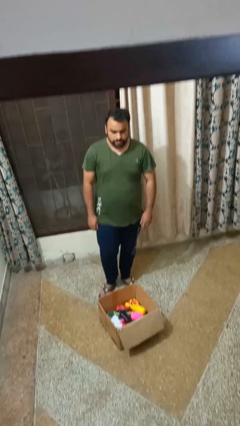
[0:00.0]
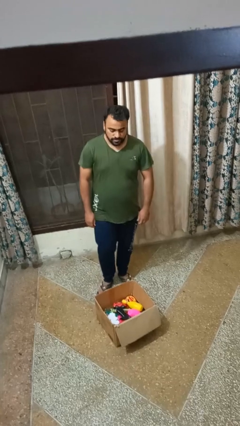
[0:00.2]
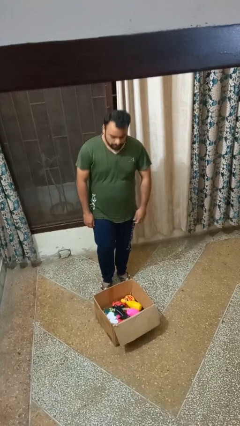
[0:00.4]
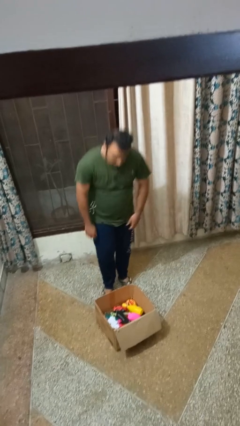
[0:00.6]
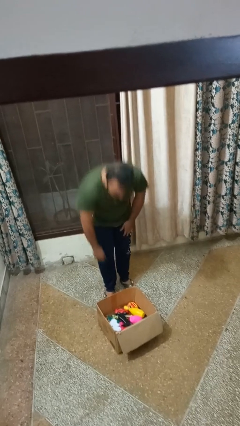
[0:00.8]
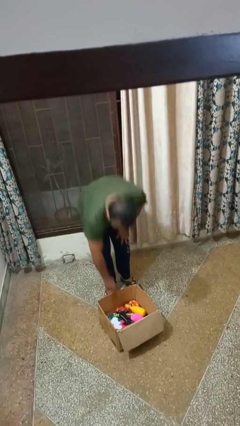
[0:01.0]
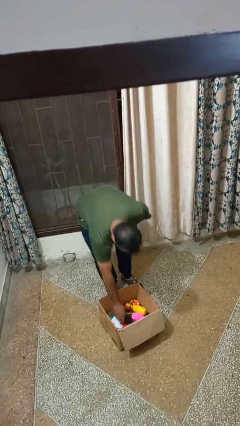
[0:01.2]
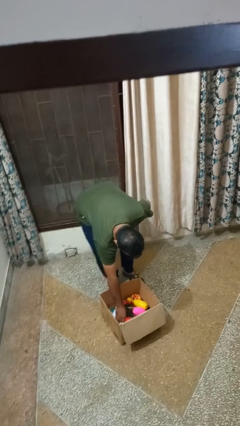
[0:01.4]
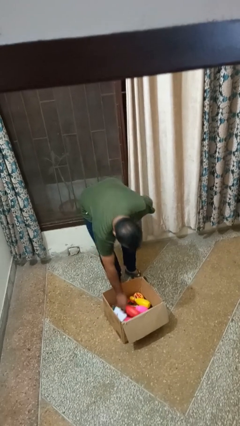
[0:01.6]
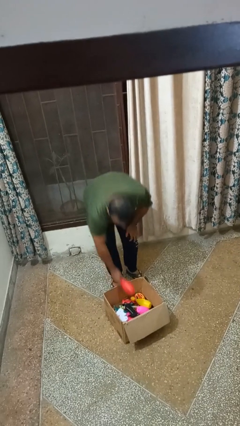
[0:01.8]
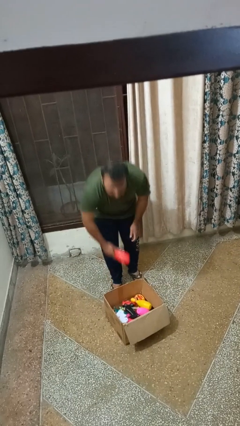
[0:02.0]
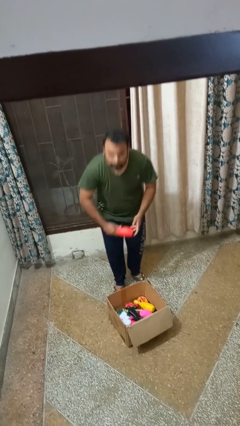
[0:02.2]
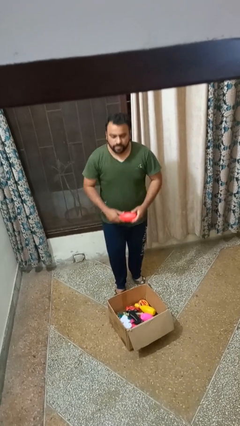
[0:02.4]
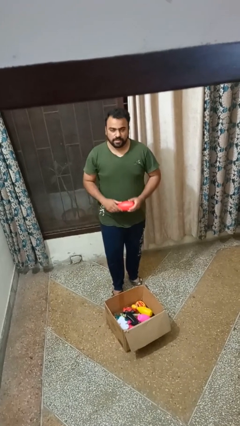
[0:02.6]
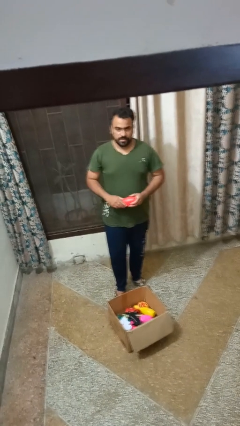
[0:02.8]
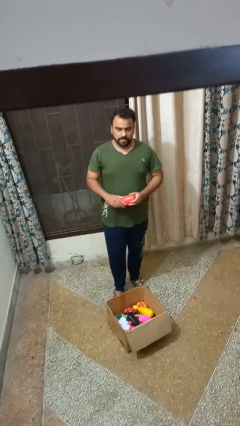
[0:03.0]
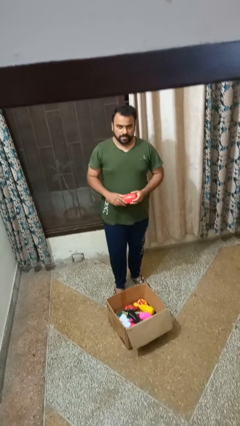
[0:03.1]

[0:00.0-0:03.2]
person takes object from box

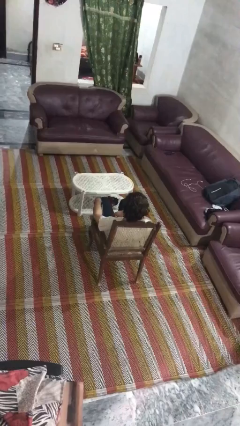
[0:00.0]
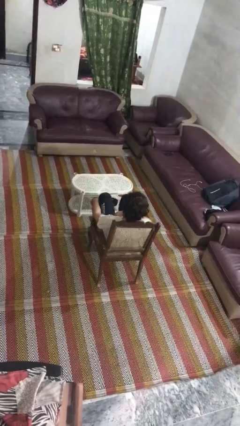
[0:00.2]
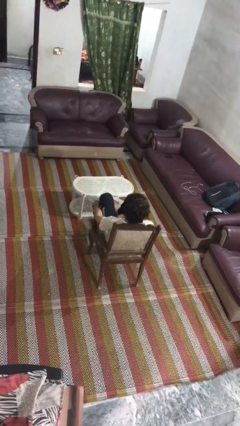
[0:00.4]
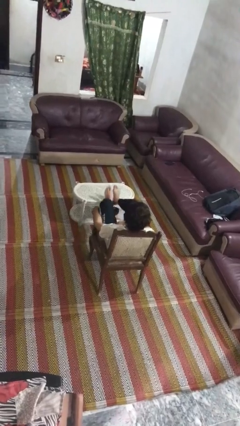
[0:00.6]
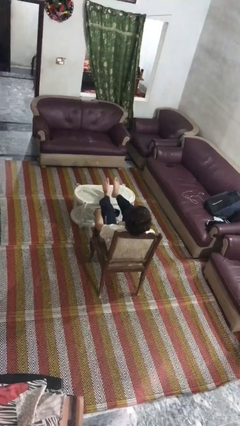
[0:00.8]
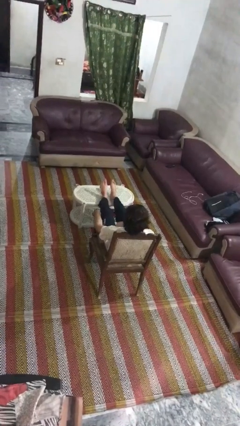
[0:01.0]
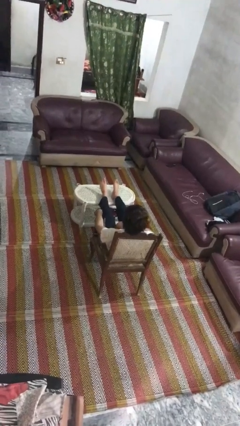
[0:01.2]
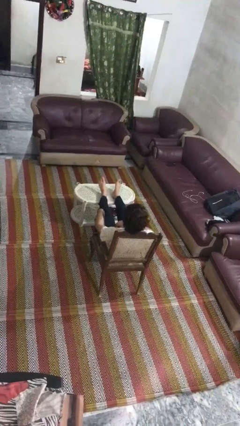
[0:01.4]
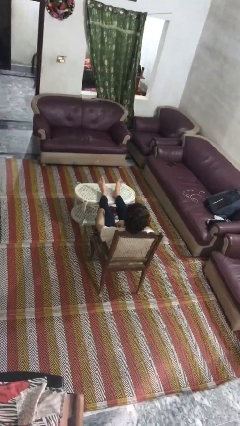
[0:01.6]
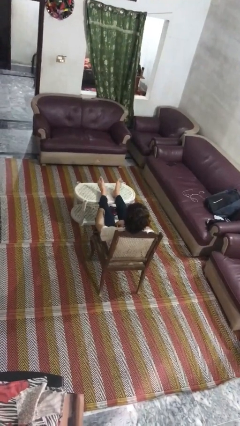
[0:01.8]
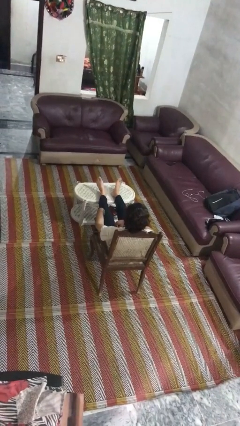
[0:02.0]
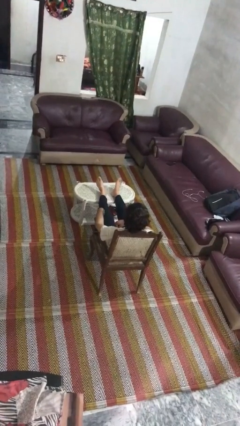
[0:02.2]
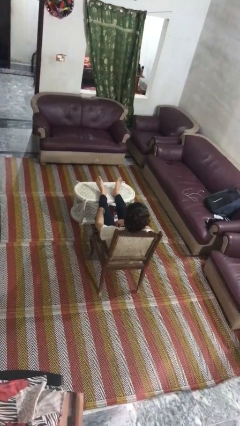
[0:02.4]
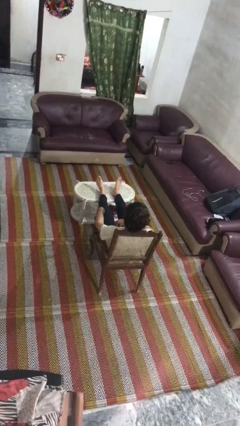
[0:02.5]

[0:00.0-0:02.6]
person puts feet up

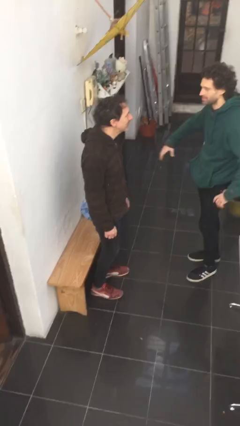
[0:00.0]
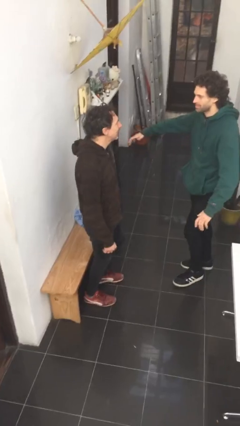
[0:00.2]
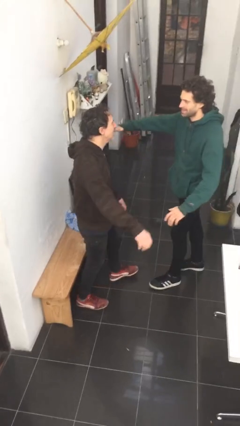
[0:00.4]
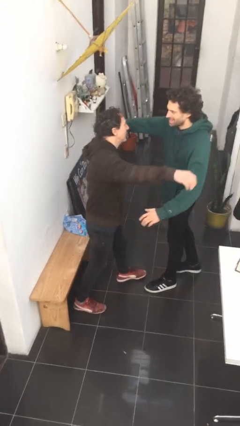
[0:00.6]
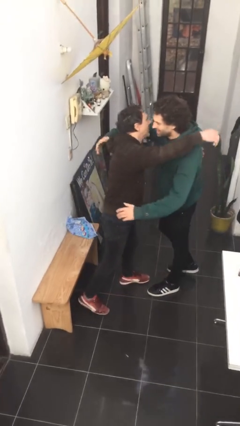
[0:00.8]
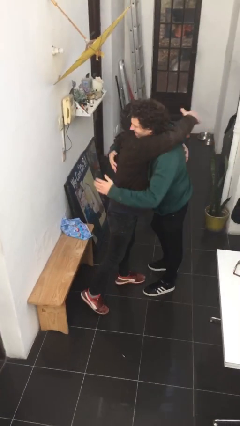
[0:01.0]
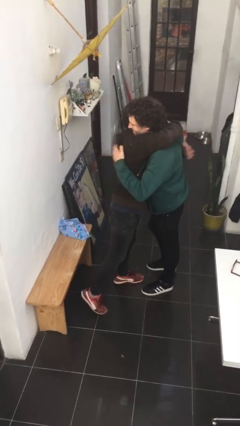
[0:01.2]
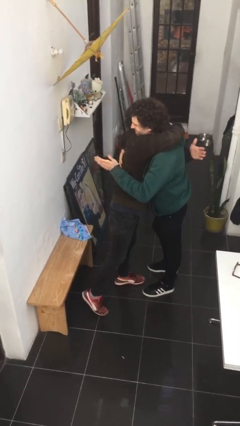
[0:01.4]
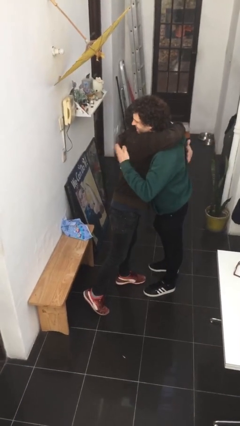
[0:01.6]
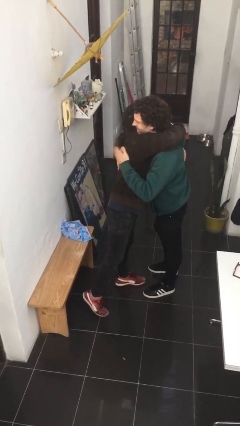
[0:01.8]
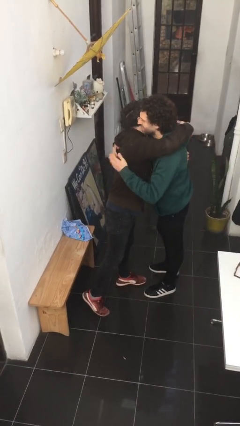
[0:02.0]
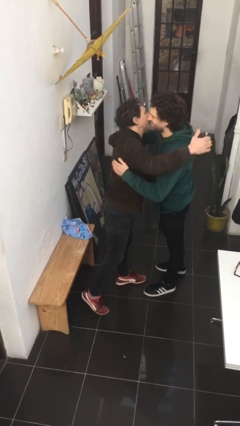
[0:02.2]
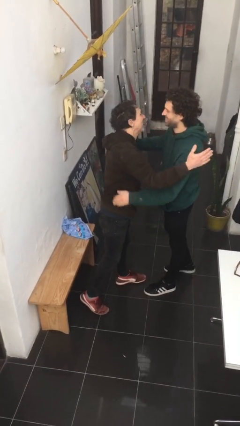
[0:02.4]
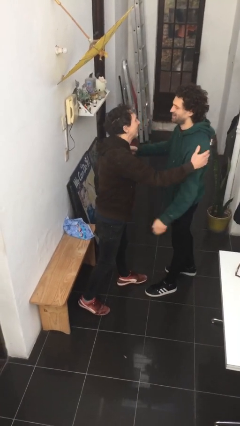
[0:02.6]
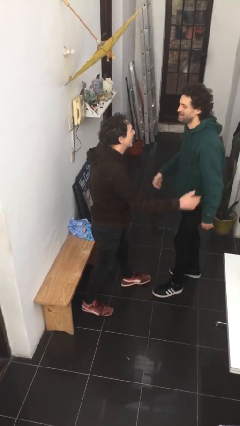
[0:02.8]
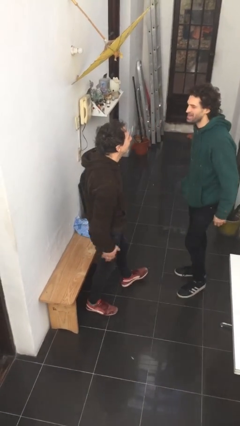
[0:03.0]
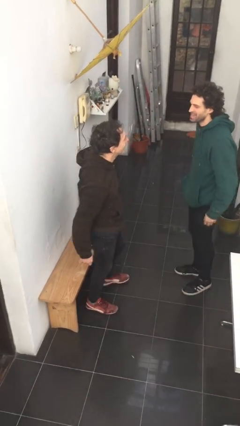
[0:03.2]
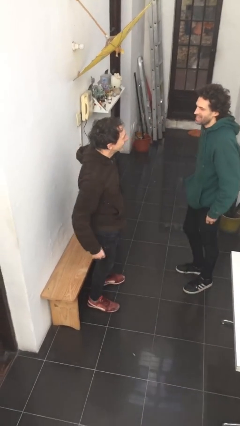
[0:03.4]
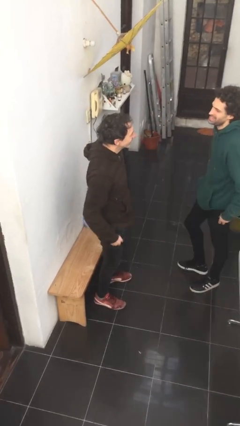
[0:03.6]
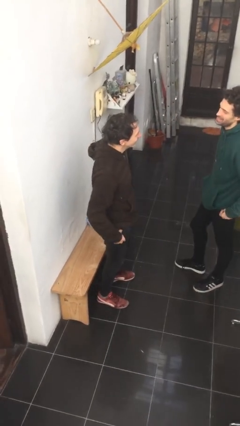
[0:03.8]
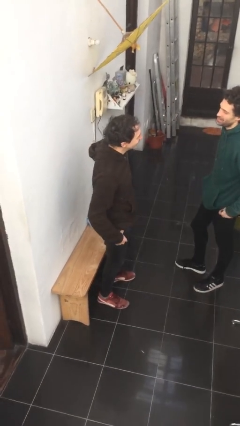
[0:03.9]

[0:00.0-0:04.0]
person embraces person

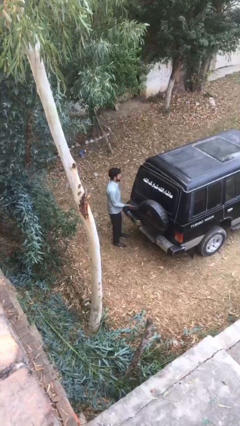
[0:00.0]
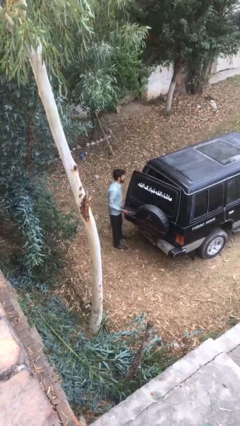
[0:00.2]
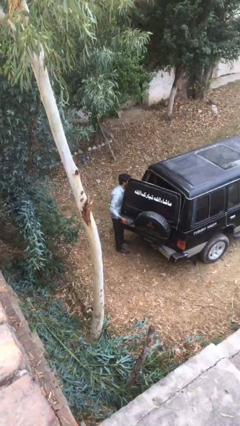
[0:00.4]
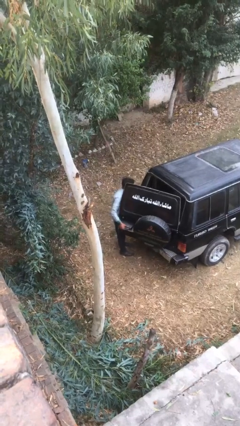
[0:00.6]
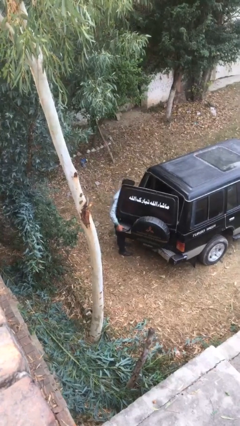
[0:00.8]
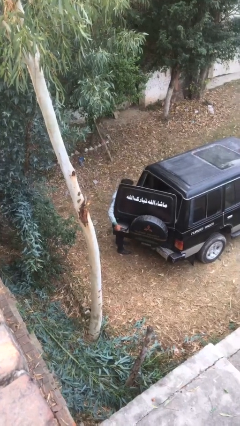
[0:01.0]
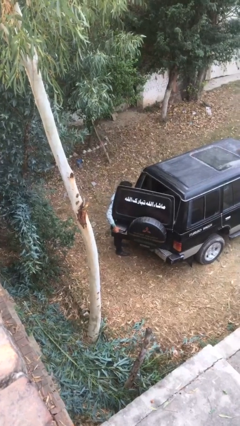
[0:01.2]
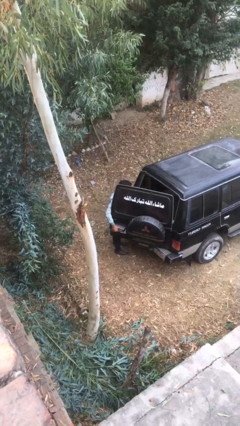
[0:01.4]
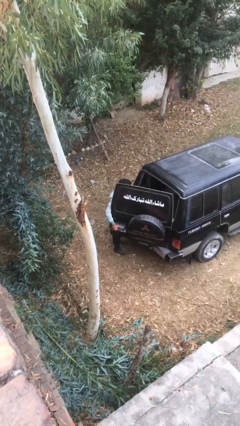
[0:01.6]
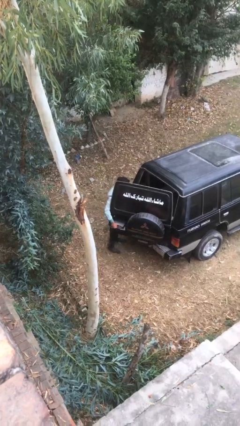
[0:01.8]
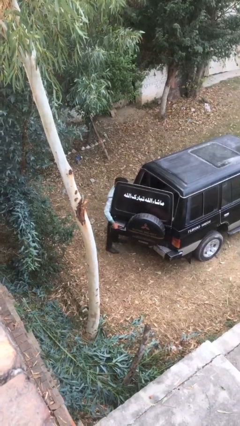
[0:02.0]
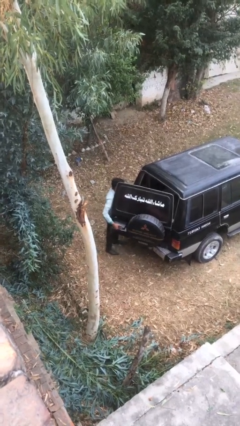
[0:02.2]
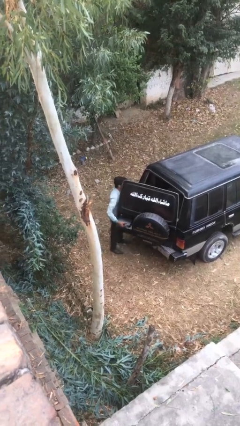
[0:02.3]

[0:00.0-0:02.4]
person opens car trunk

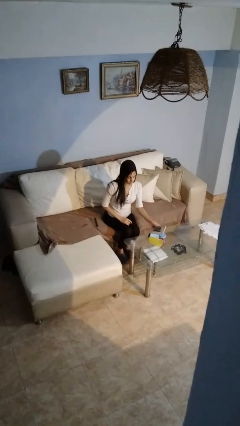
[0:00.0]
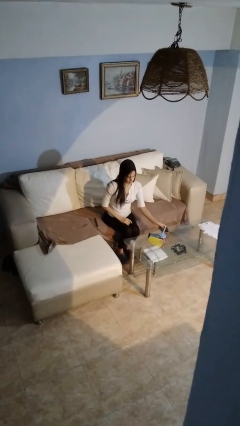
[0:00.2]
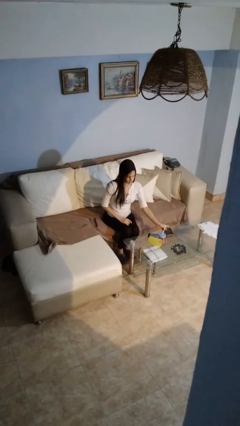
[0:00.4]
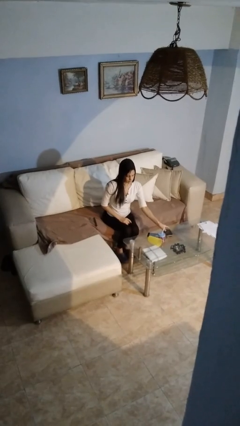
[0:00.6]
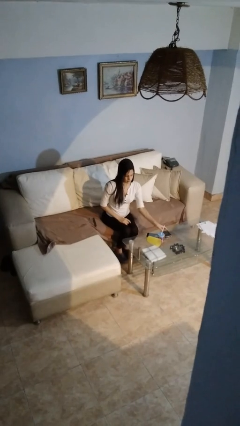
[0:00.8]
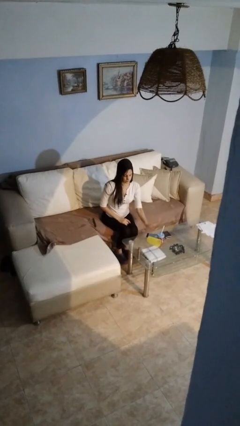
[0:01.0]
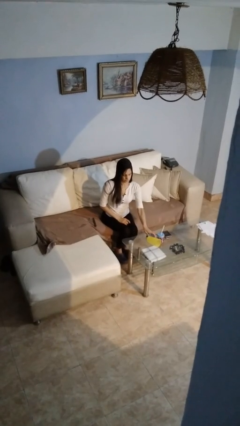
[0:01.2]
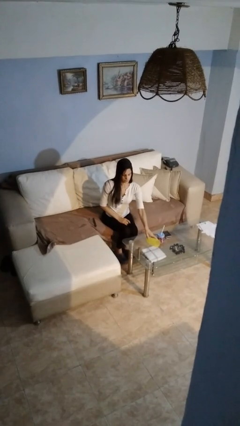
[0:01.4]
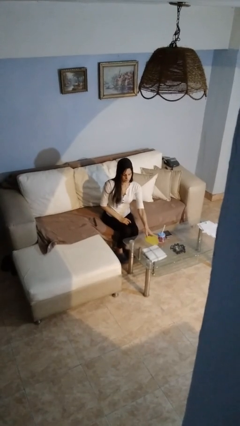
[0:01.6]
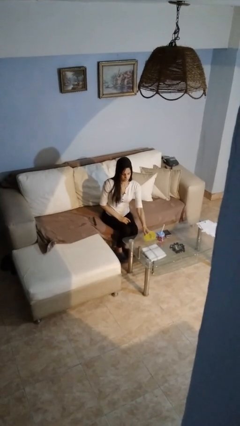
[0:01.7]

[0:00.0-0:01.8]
person sets upright glass

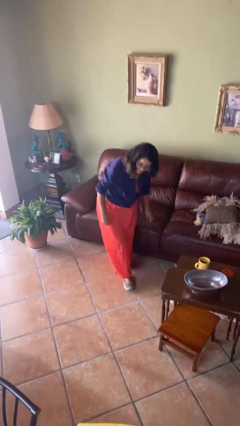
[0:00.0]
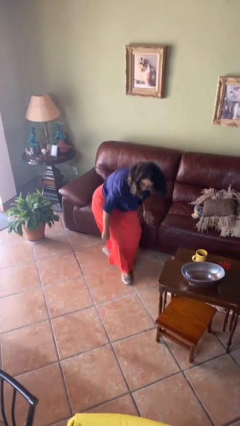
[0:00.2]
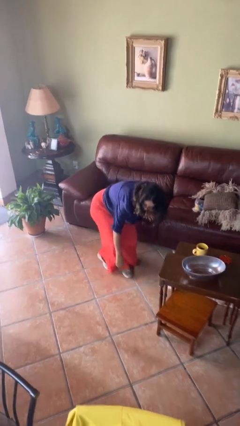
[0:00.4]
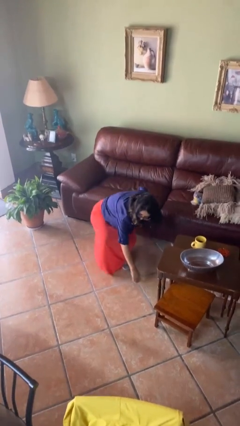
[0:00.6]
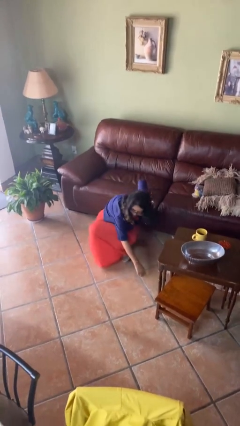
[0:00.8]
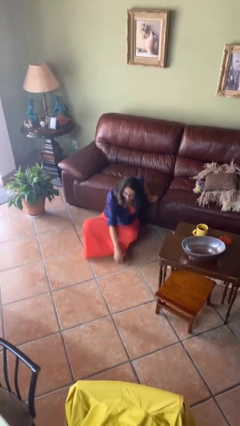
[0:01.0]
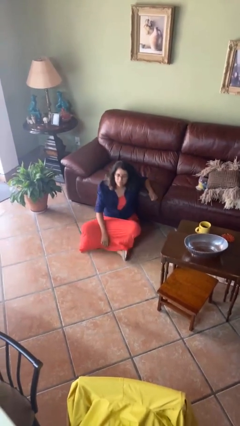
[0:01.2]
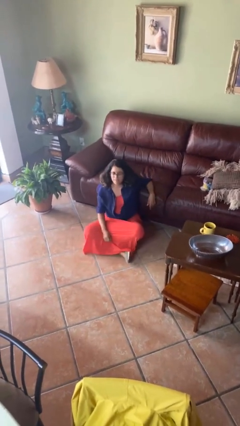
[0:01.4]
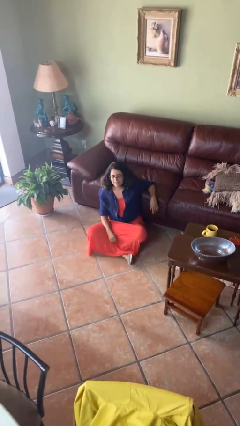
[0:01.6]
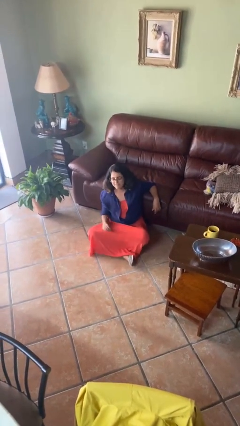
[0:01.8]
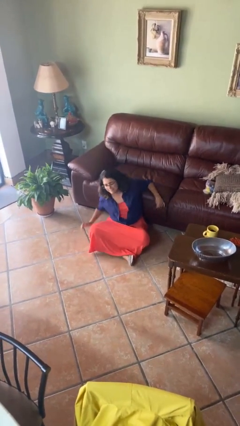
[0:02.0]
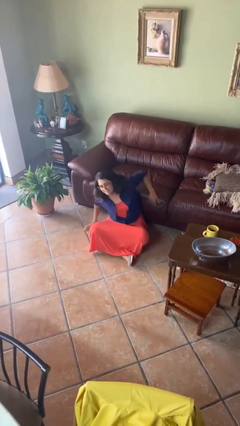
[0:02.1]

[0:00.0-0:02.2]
person sits crisscross

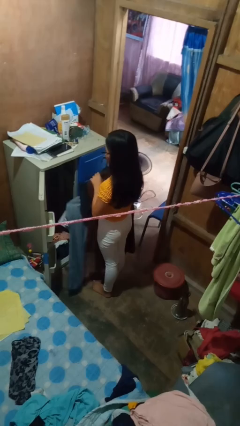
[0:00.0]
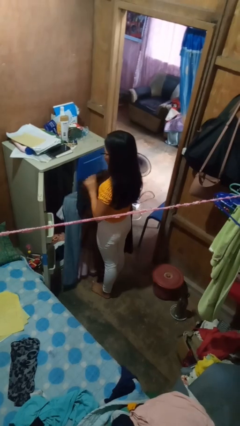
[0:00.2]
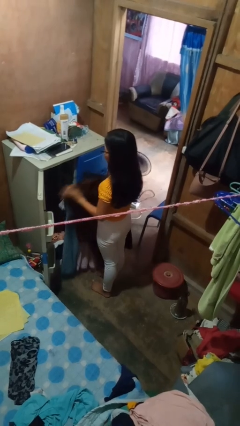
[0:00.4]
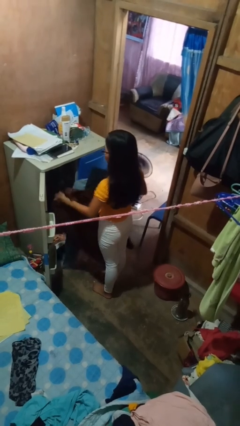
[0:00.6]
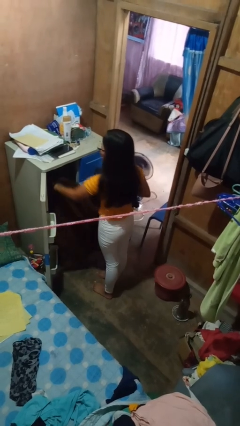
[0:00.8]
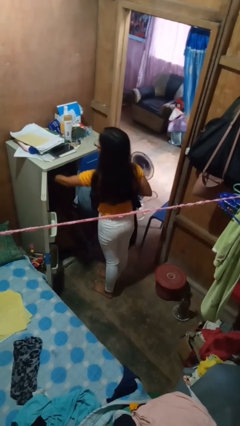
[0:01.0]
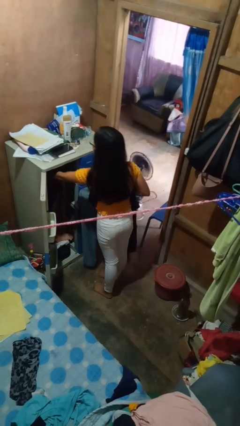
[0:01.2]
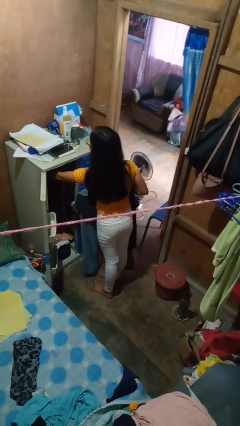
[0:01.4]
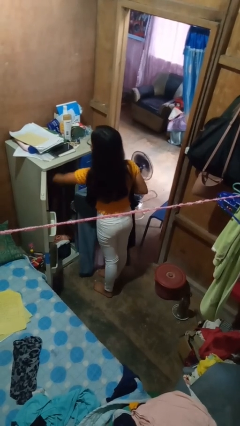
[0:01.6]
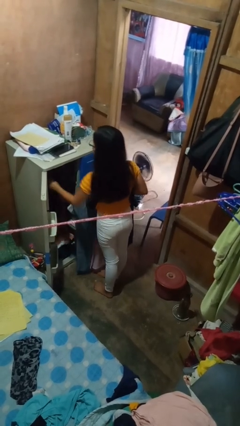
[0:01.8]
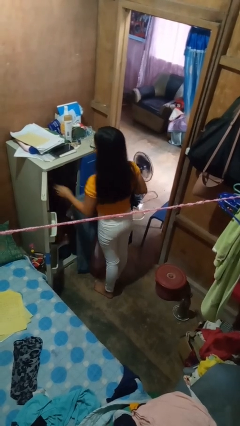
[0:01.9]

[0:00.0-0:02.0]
person puts clothes into closet
